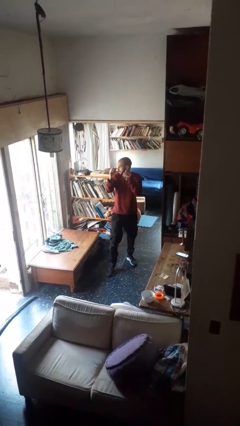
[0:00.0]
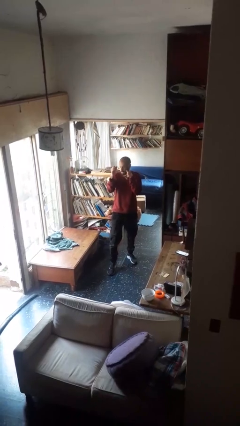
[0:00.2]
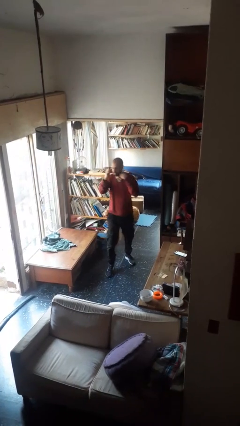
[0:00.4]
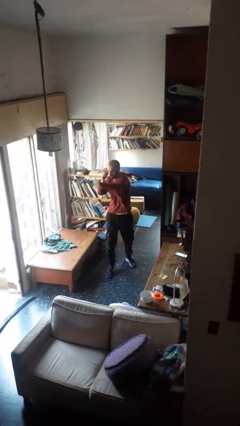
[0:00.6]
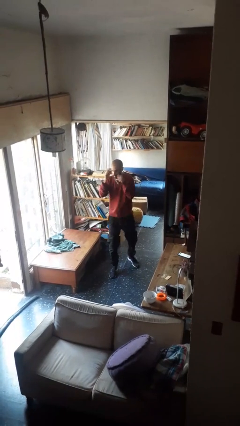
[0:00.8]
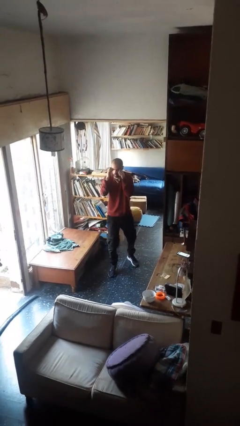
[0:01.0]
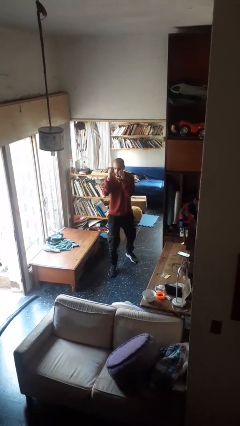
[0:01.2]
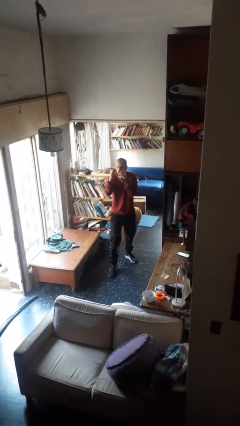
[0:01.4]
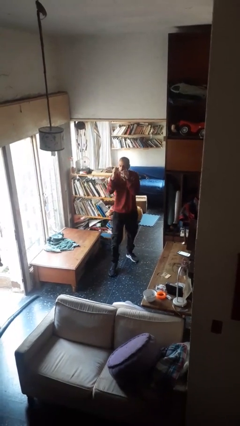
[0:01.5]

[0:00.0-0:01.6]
person karate chop

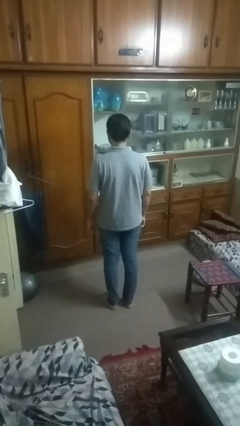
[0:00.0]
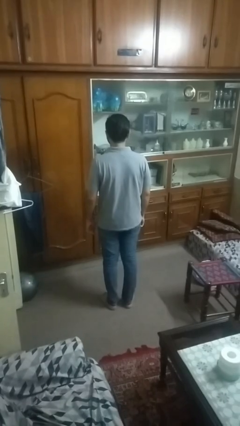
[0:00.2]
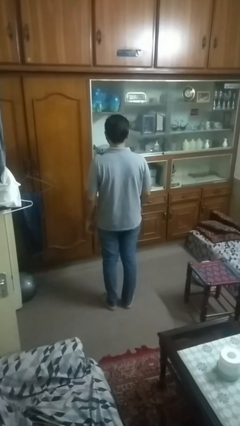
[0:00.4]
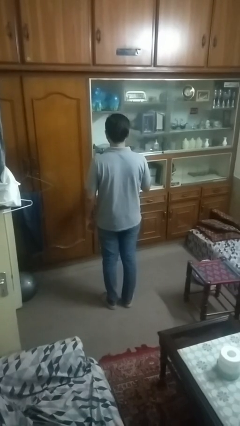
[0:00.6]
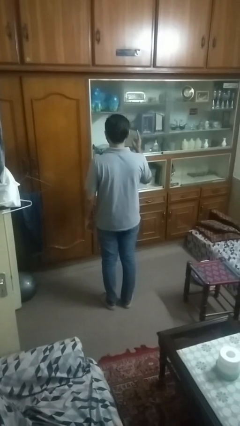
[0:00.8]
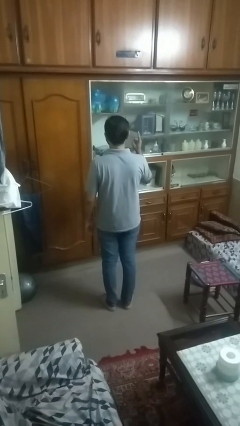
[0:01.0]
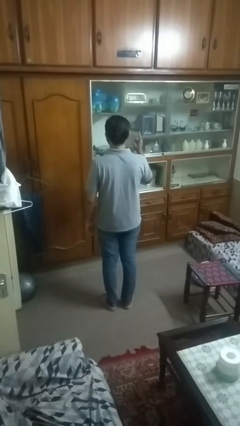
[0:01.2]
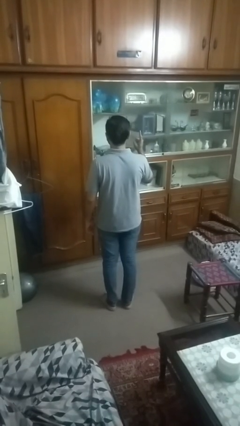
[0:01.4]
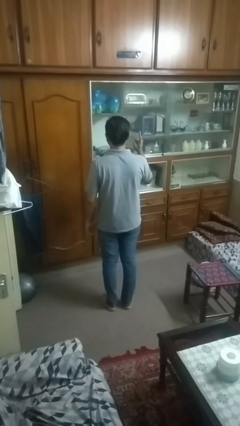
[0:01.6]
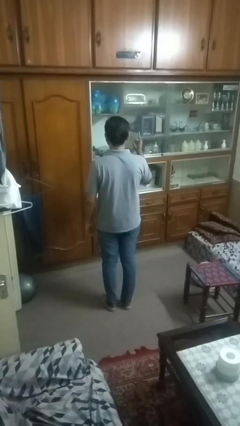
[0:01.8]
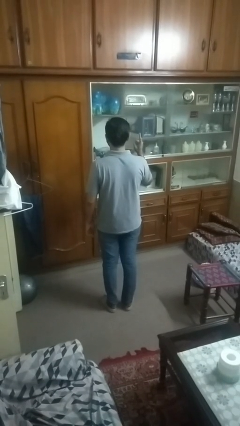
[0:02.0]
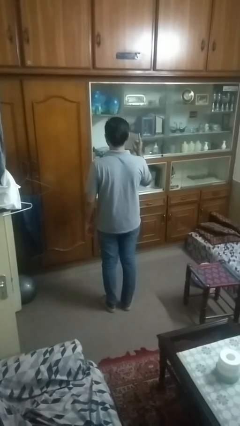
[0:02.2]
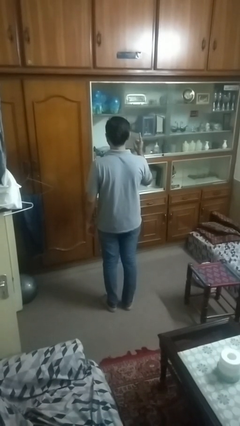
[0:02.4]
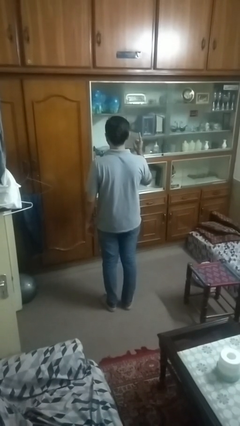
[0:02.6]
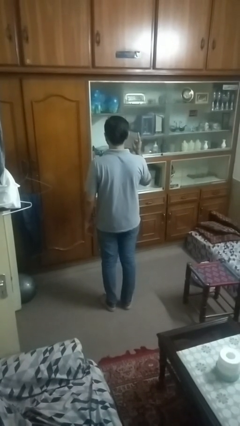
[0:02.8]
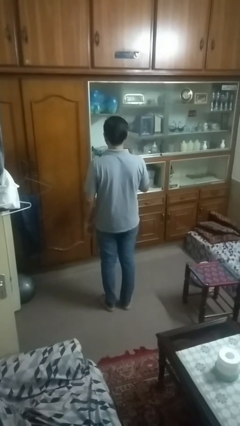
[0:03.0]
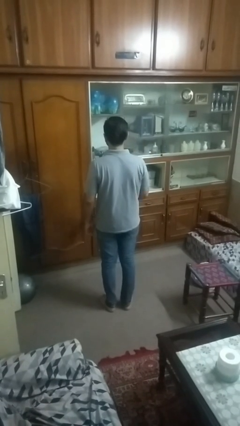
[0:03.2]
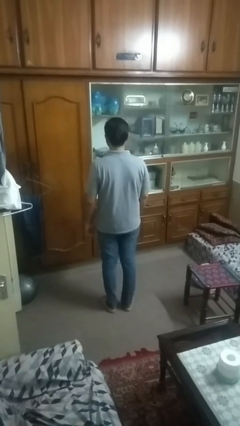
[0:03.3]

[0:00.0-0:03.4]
person gestures number one

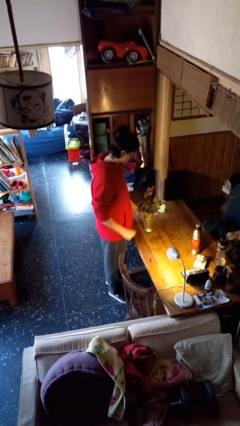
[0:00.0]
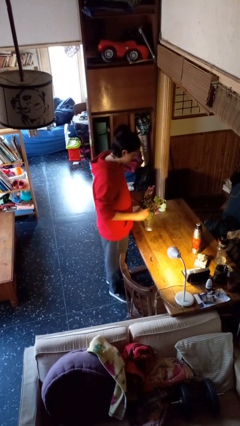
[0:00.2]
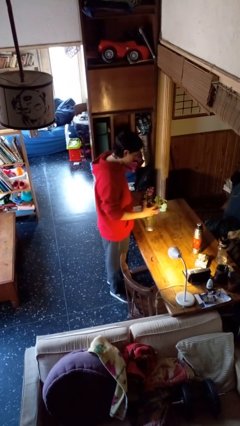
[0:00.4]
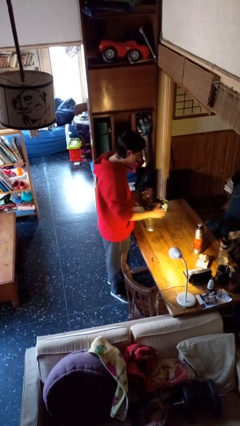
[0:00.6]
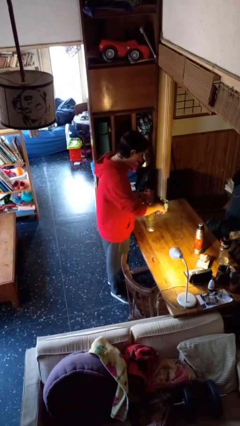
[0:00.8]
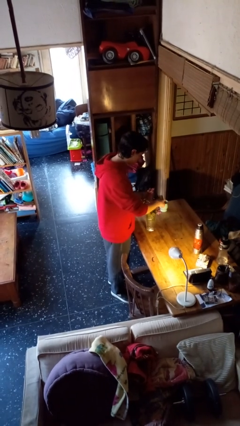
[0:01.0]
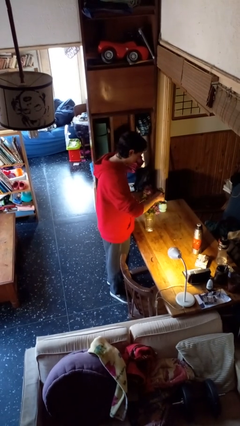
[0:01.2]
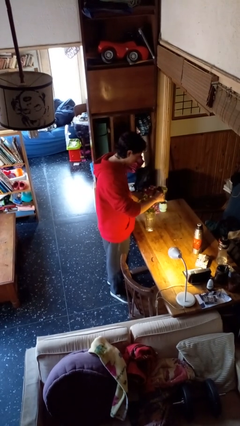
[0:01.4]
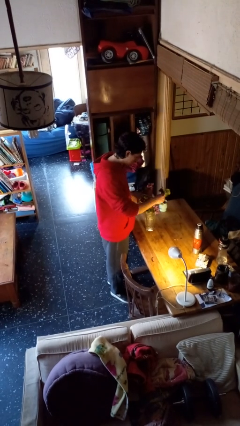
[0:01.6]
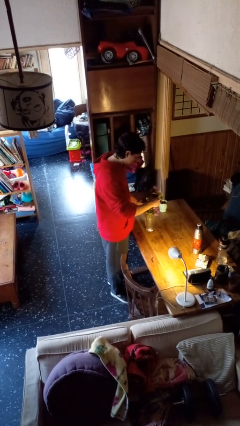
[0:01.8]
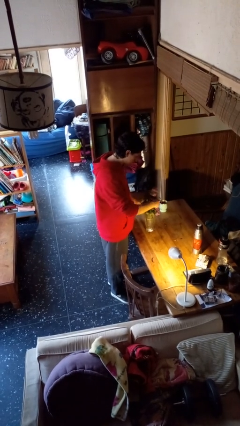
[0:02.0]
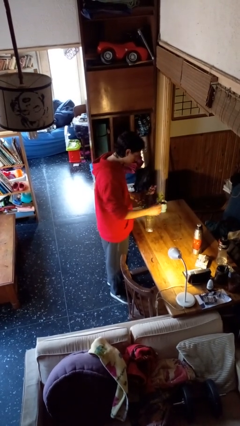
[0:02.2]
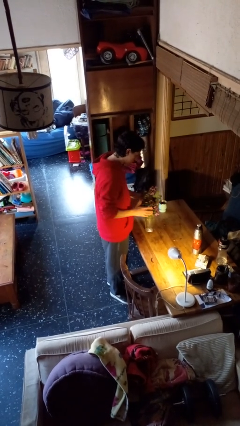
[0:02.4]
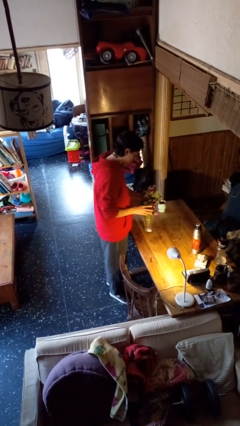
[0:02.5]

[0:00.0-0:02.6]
person arranges flowers in vase

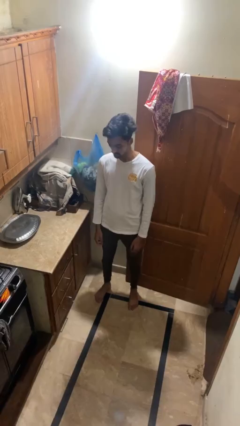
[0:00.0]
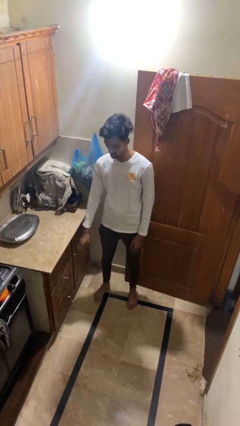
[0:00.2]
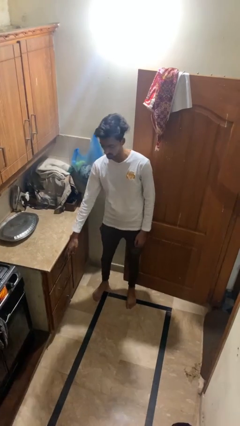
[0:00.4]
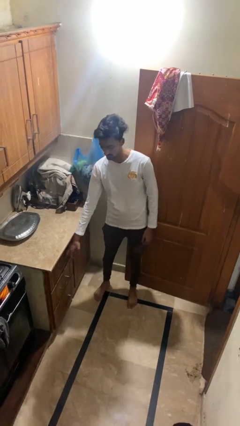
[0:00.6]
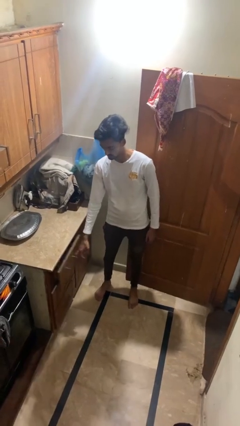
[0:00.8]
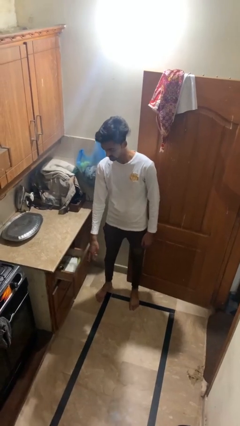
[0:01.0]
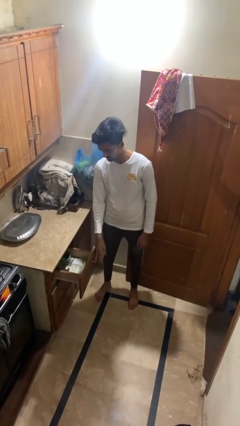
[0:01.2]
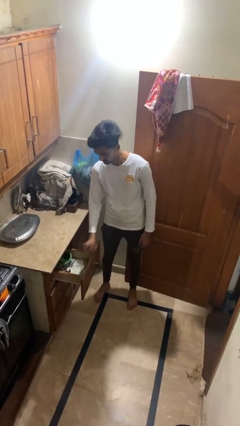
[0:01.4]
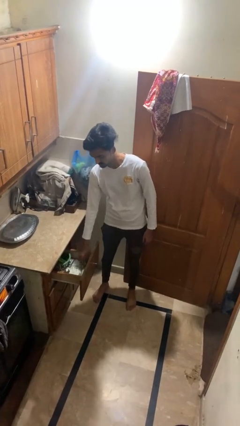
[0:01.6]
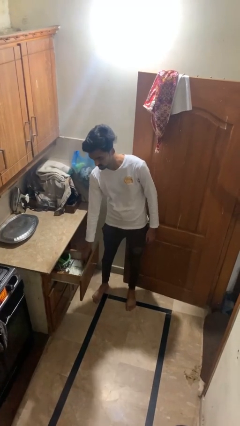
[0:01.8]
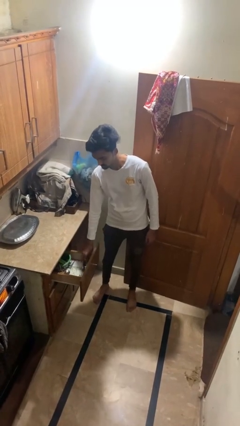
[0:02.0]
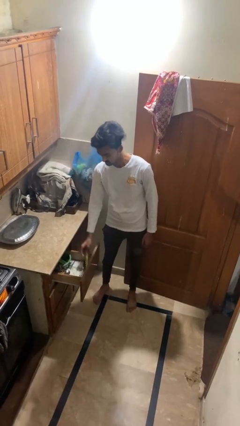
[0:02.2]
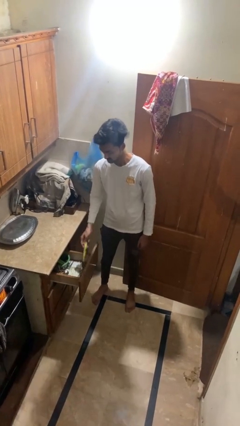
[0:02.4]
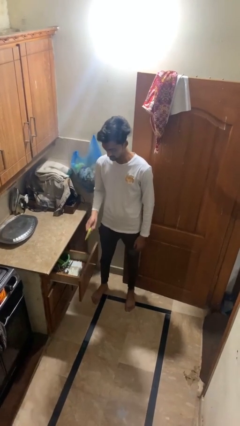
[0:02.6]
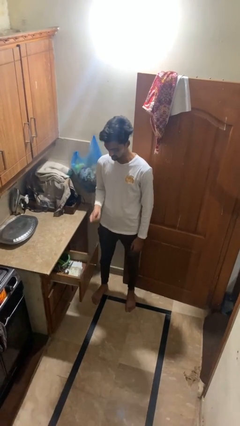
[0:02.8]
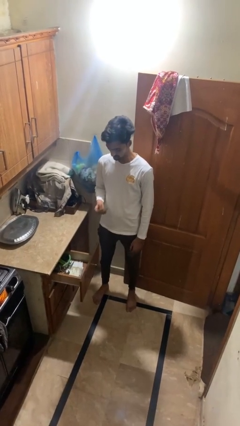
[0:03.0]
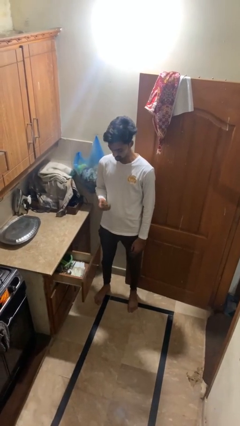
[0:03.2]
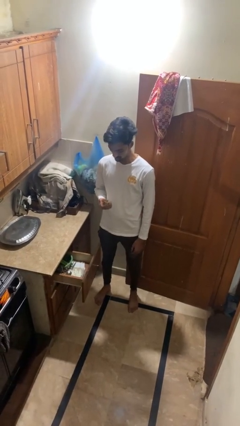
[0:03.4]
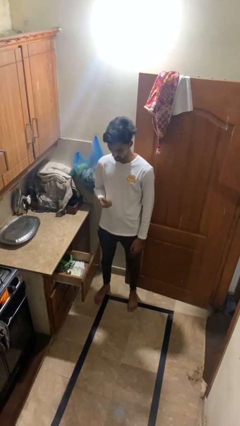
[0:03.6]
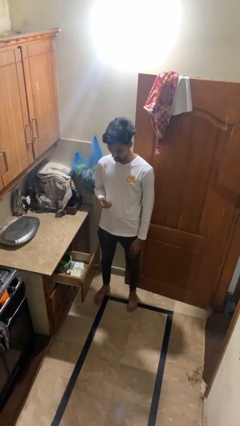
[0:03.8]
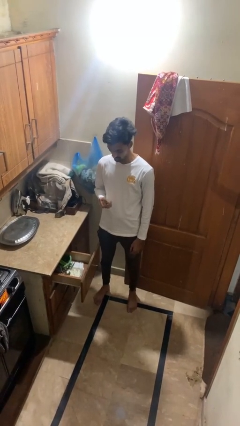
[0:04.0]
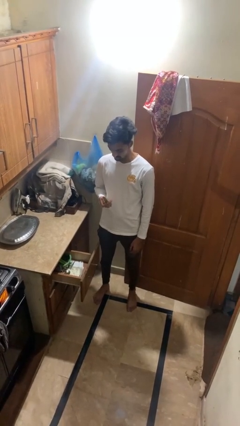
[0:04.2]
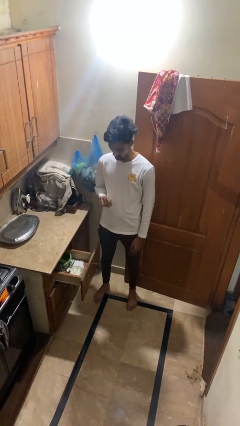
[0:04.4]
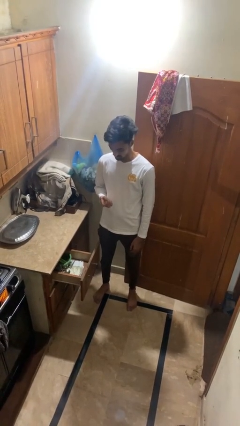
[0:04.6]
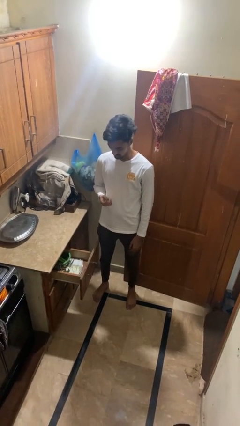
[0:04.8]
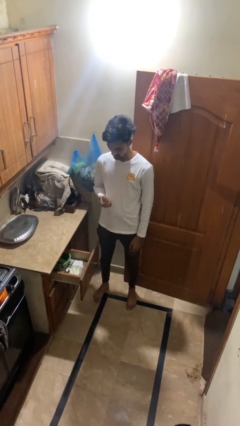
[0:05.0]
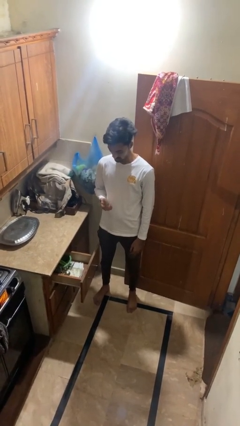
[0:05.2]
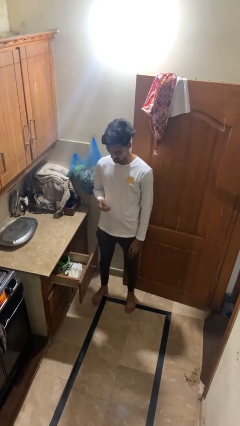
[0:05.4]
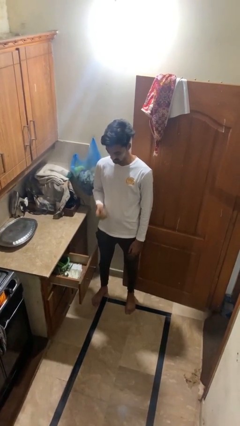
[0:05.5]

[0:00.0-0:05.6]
person takes object from kitchen drawer

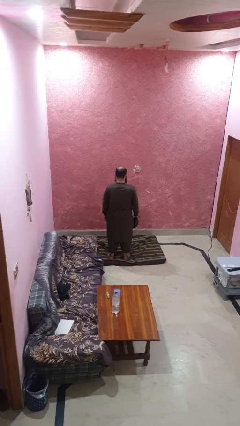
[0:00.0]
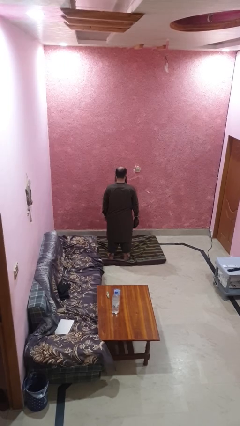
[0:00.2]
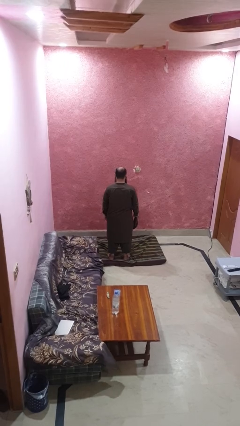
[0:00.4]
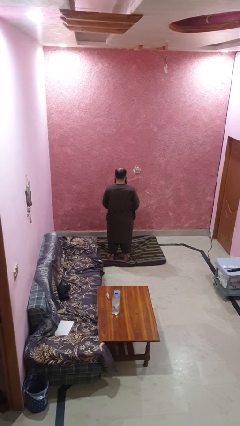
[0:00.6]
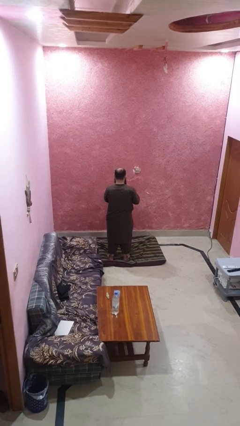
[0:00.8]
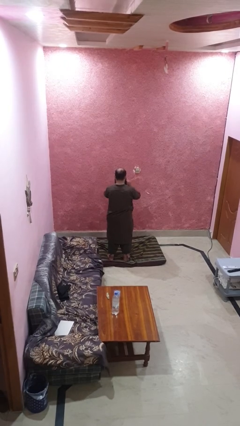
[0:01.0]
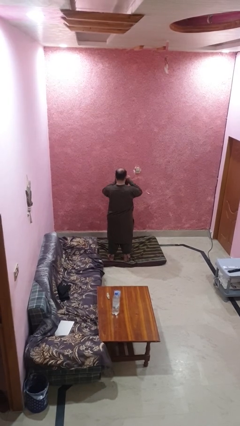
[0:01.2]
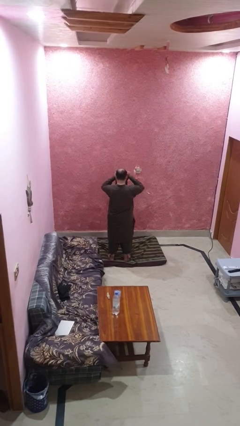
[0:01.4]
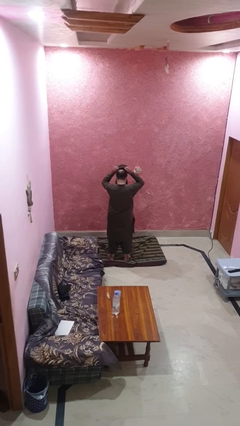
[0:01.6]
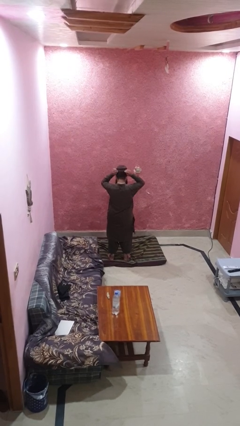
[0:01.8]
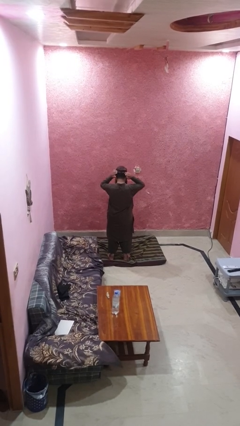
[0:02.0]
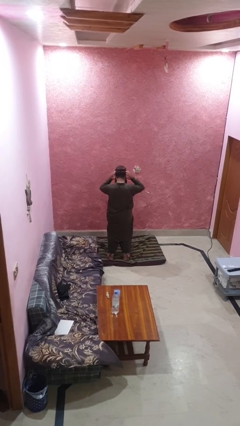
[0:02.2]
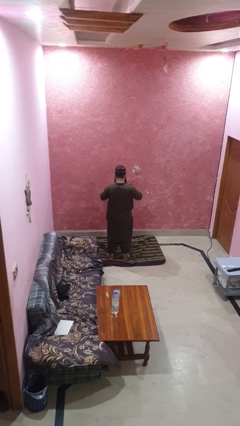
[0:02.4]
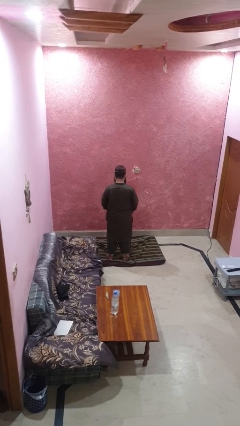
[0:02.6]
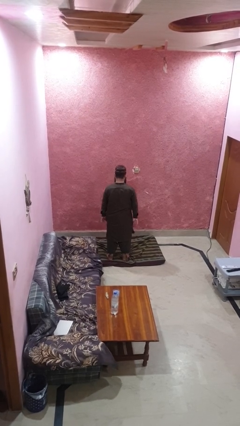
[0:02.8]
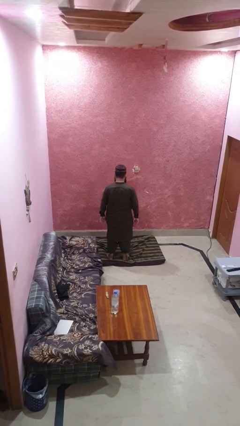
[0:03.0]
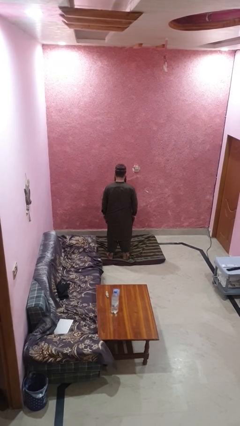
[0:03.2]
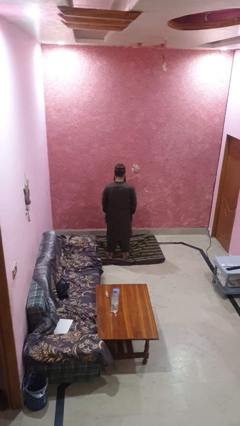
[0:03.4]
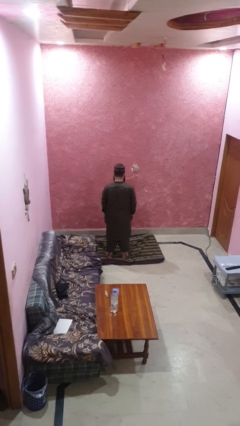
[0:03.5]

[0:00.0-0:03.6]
person puts on hat

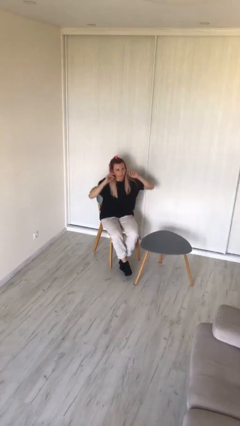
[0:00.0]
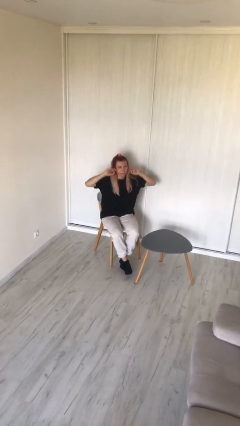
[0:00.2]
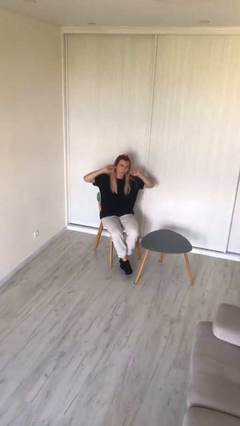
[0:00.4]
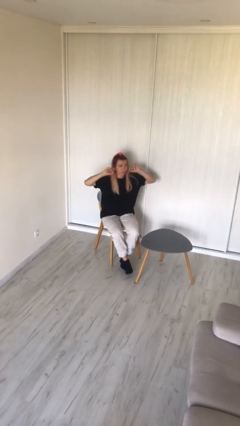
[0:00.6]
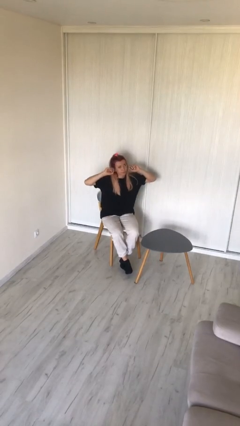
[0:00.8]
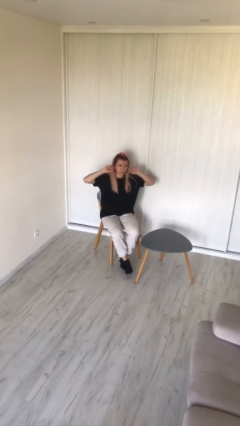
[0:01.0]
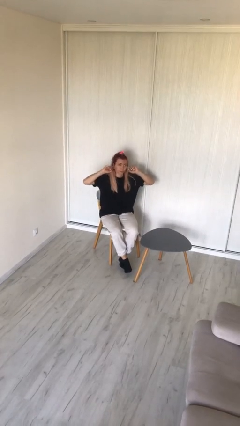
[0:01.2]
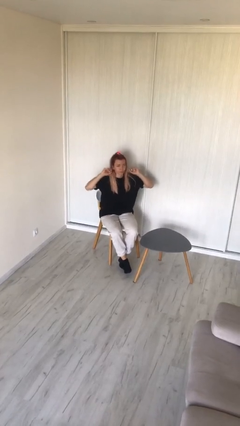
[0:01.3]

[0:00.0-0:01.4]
person puts fingers in ear
